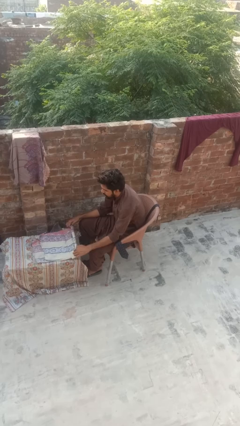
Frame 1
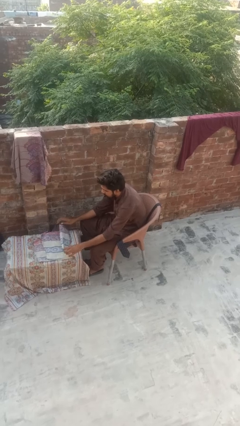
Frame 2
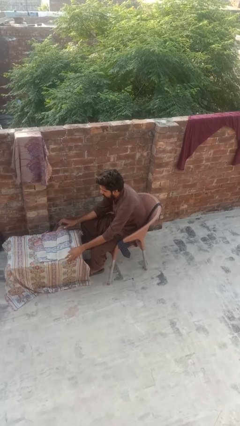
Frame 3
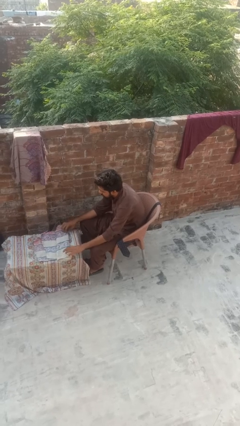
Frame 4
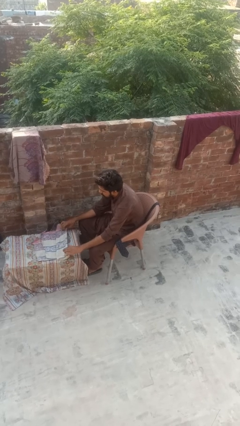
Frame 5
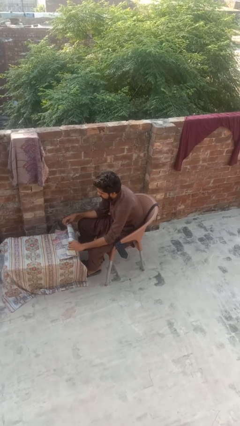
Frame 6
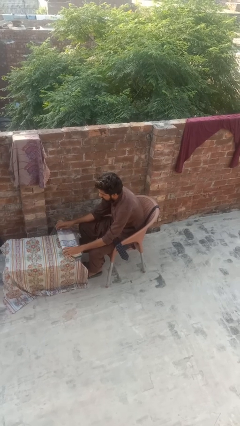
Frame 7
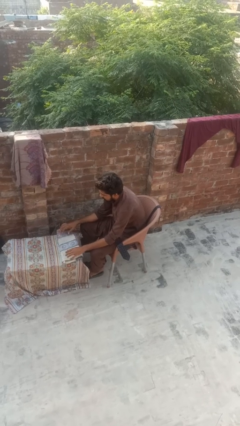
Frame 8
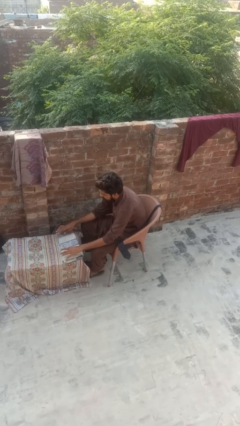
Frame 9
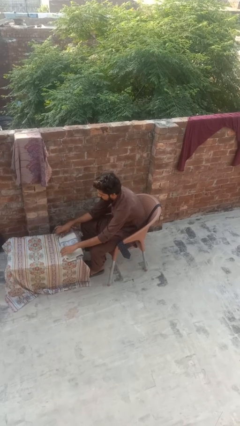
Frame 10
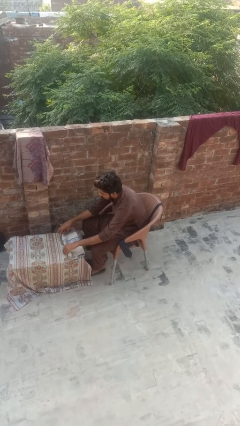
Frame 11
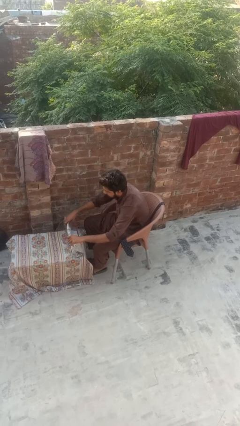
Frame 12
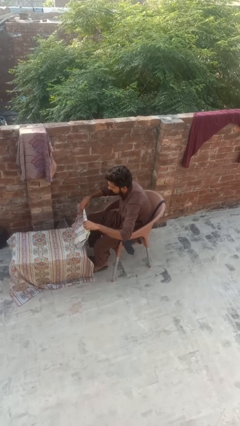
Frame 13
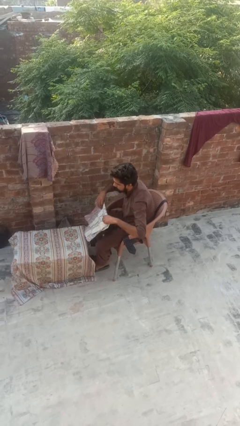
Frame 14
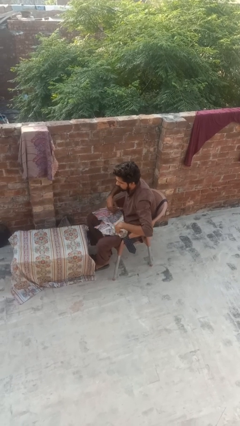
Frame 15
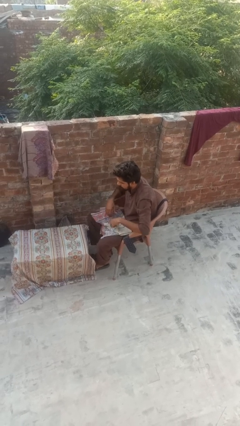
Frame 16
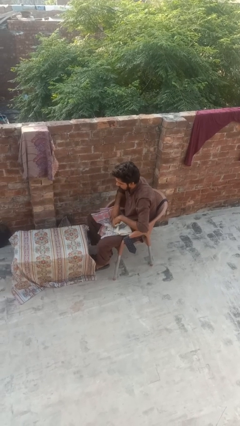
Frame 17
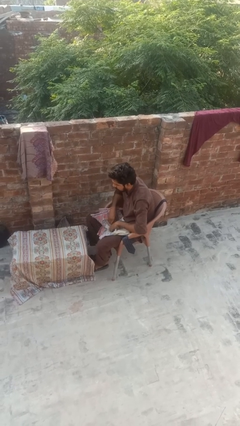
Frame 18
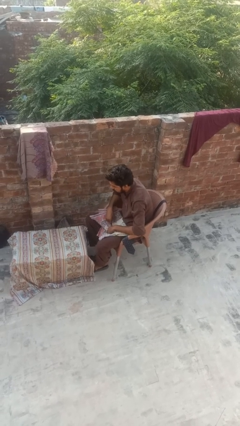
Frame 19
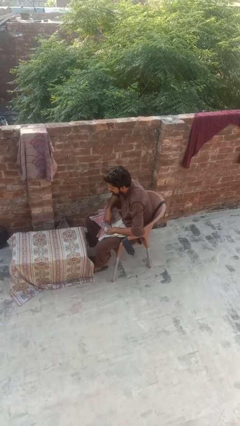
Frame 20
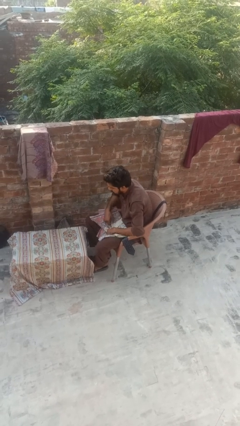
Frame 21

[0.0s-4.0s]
person folds tablecloth

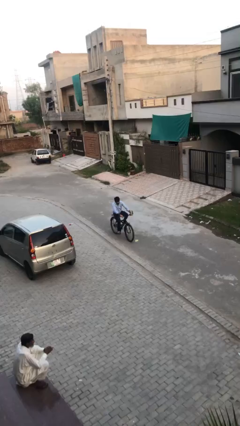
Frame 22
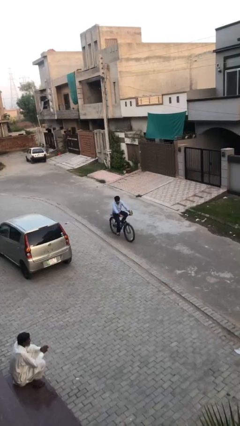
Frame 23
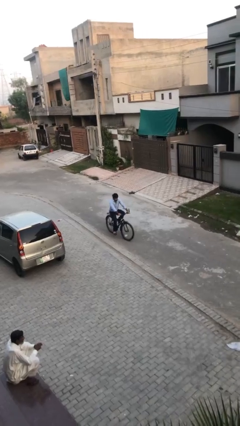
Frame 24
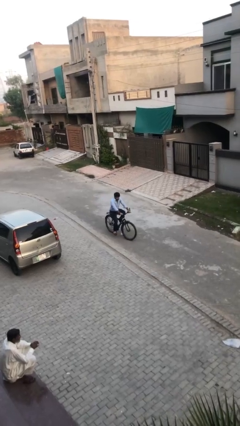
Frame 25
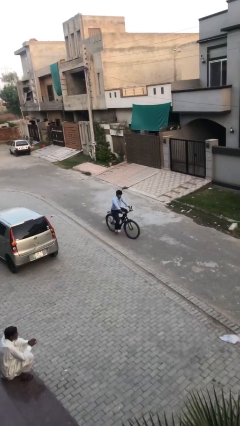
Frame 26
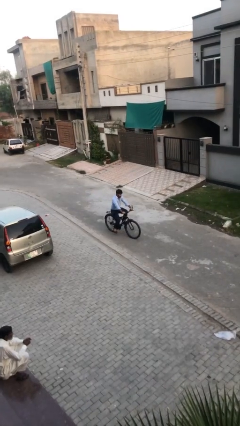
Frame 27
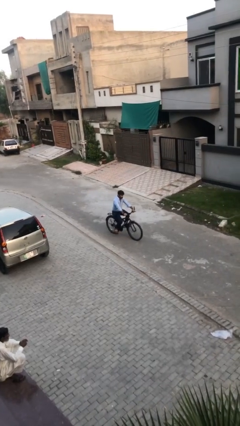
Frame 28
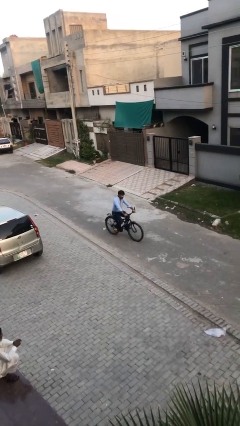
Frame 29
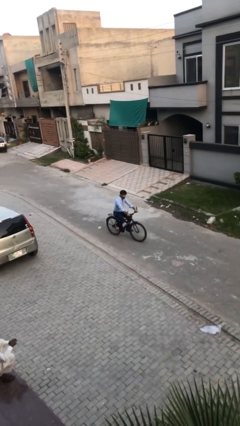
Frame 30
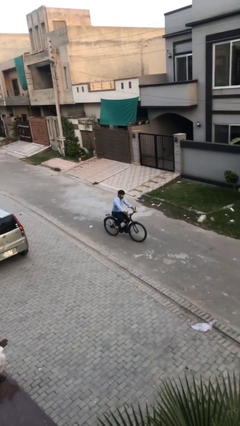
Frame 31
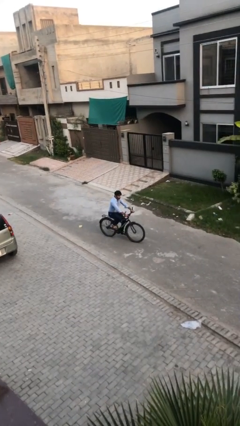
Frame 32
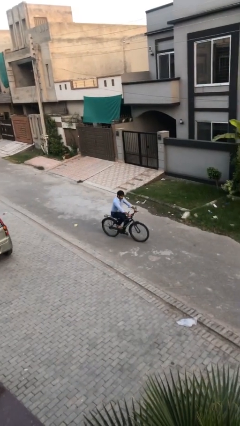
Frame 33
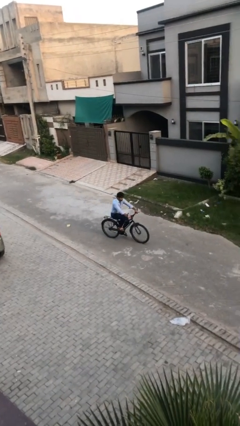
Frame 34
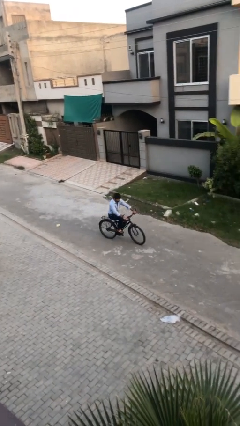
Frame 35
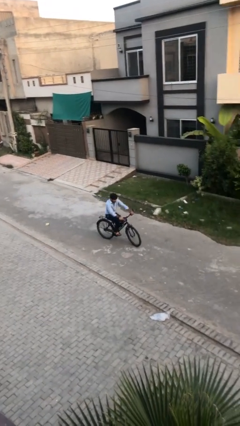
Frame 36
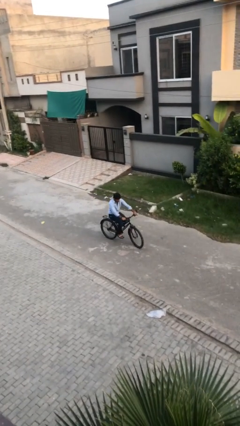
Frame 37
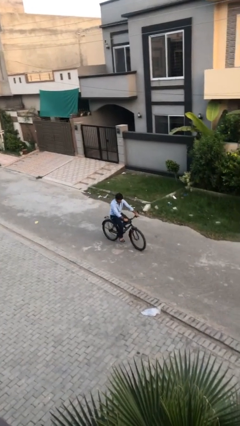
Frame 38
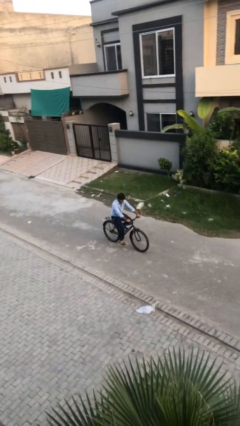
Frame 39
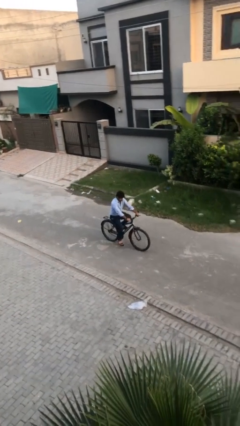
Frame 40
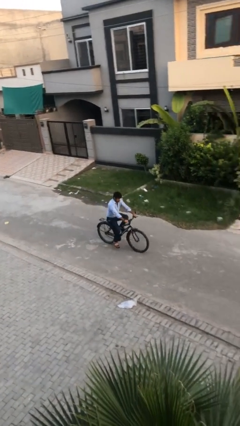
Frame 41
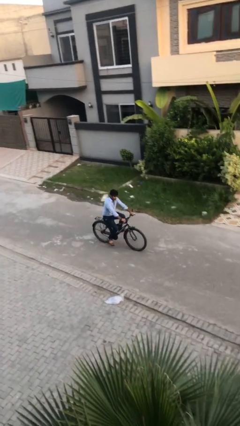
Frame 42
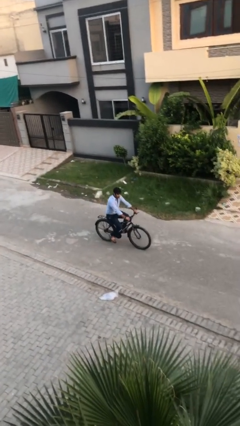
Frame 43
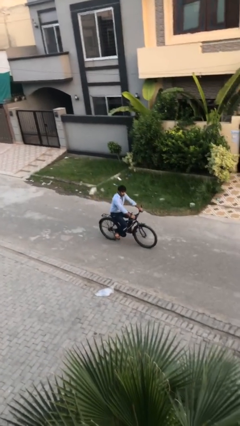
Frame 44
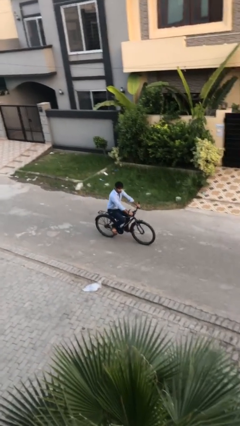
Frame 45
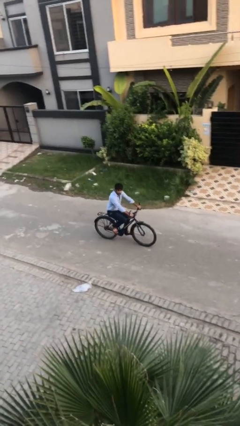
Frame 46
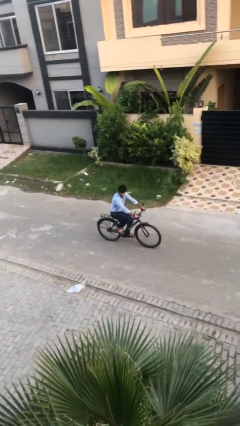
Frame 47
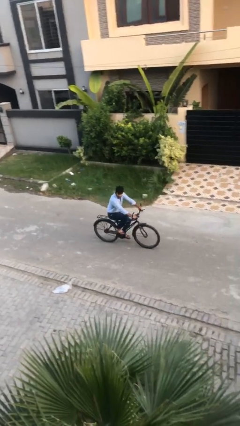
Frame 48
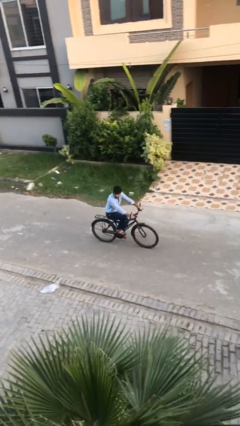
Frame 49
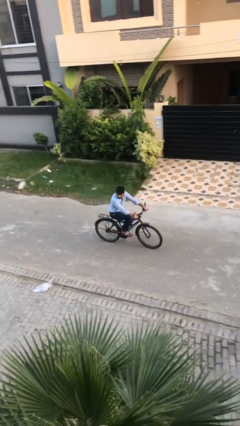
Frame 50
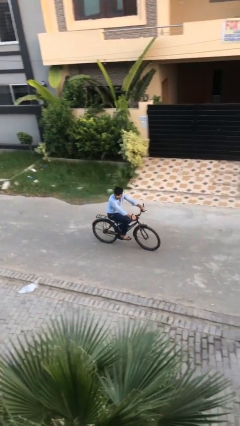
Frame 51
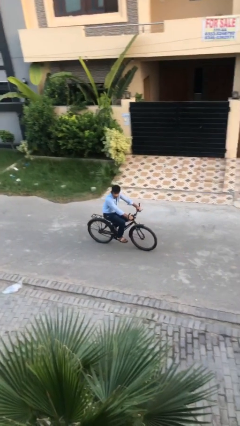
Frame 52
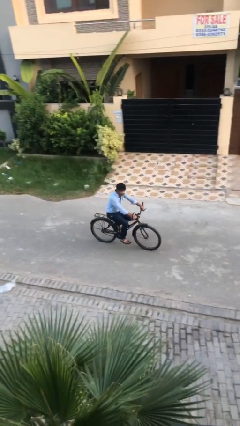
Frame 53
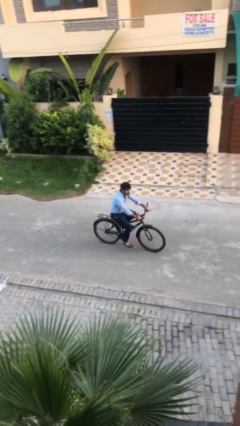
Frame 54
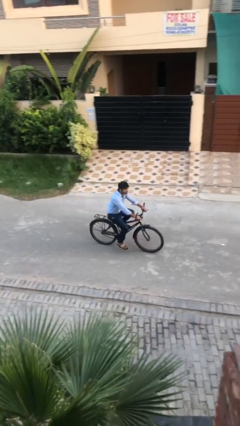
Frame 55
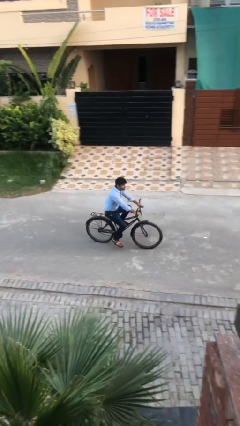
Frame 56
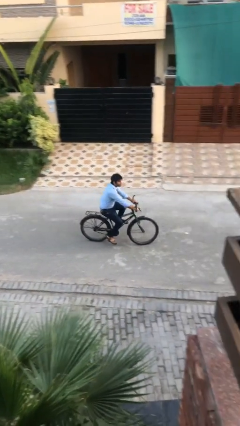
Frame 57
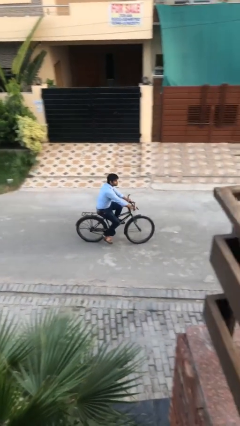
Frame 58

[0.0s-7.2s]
person rides bicycle

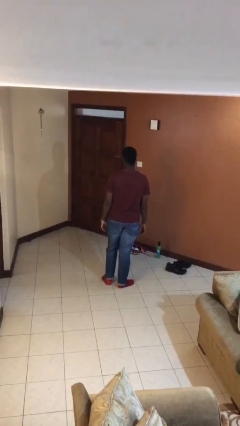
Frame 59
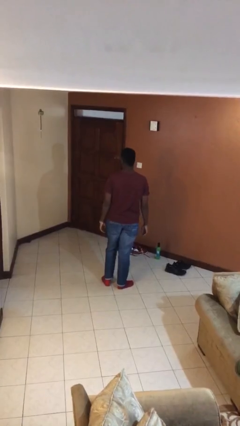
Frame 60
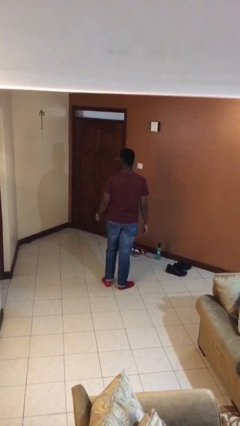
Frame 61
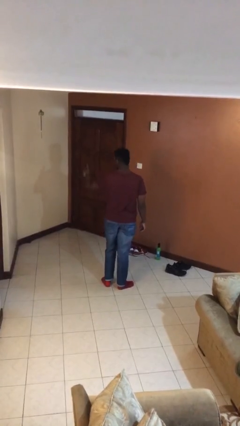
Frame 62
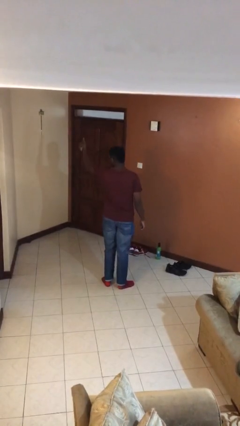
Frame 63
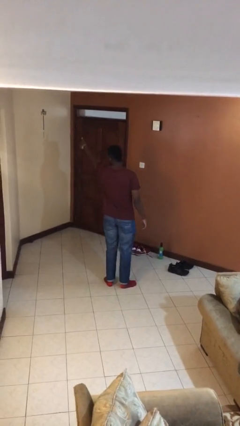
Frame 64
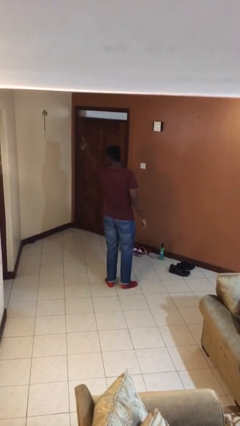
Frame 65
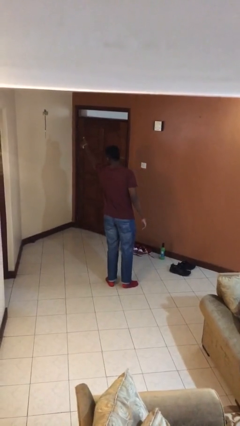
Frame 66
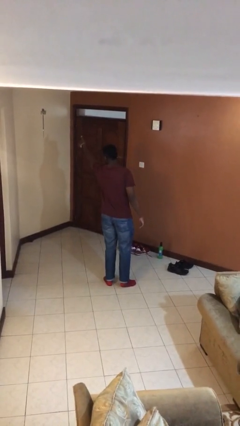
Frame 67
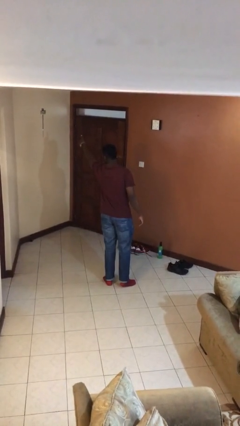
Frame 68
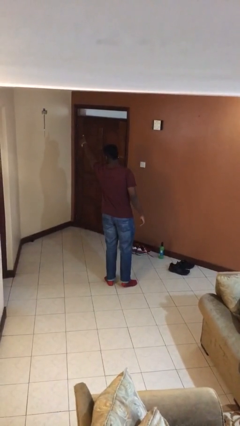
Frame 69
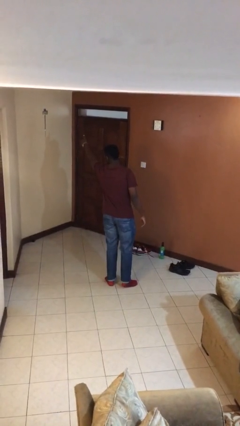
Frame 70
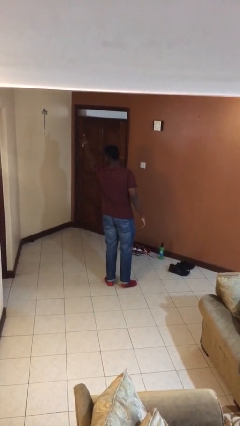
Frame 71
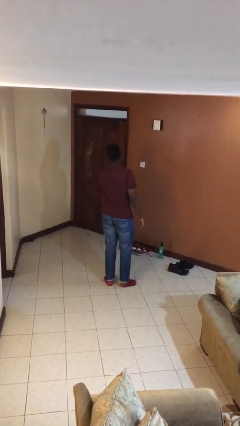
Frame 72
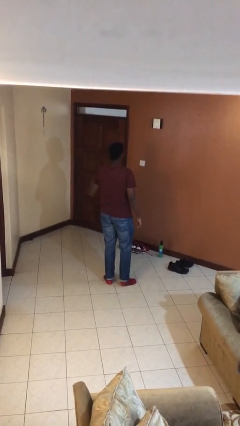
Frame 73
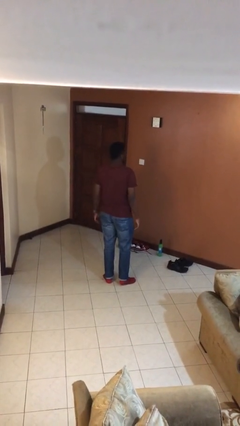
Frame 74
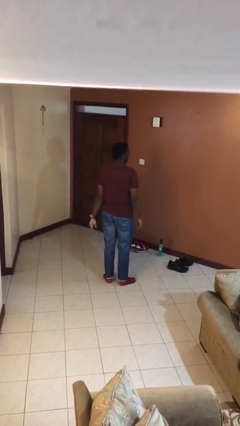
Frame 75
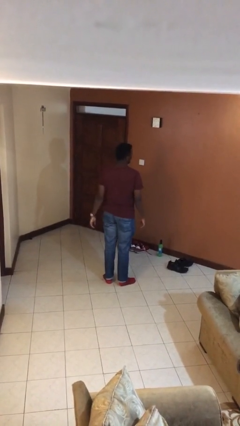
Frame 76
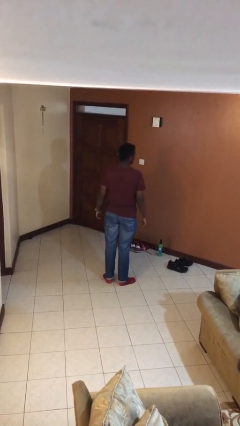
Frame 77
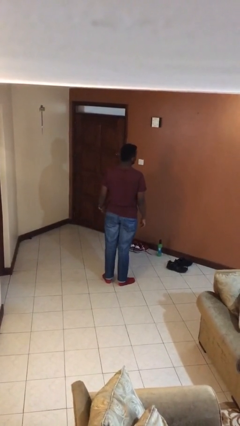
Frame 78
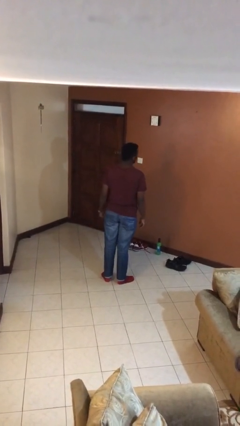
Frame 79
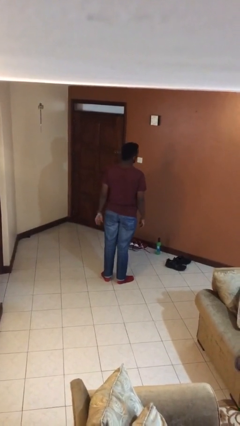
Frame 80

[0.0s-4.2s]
person gestures thumbs up

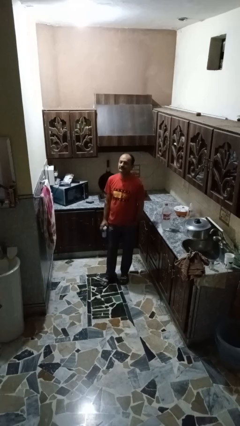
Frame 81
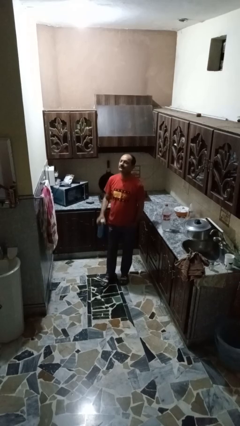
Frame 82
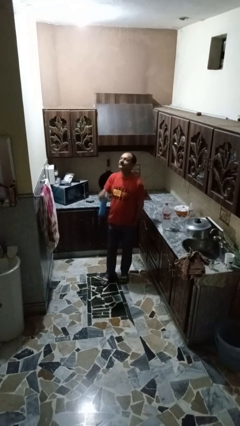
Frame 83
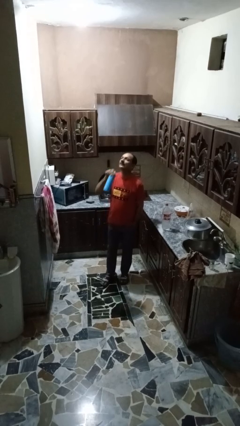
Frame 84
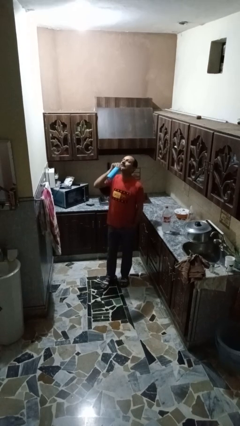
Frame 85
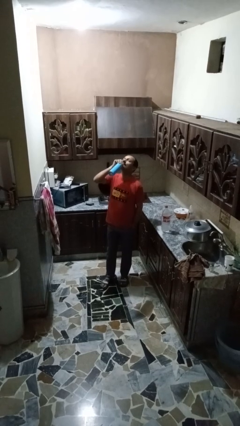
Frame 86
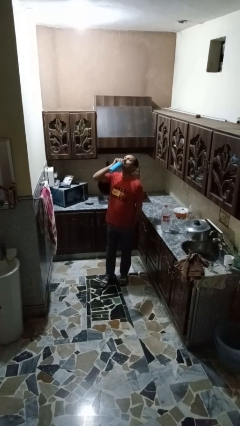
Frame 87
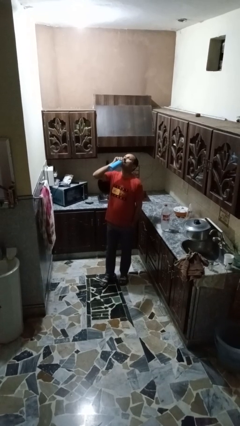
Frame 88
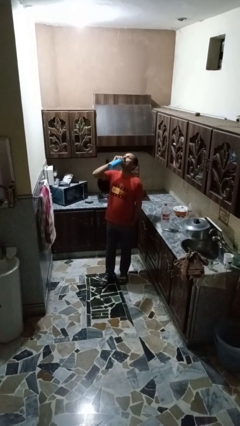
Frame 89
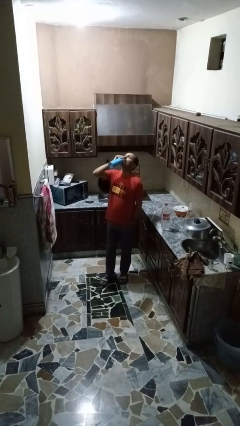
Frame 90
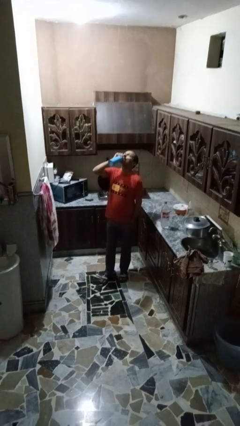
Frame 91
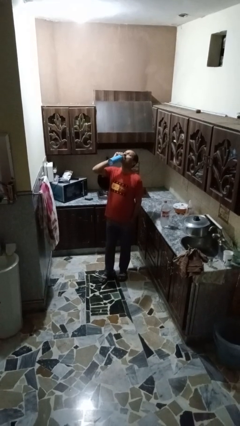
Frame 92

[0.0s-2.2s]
person drinks from bottle
